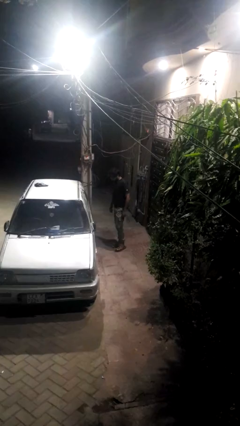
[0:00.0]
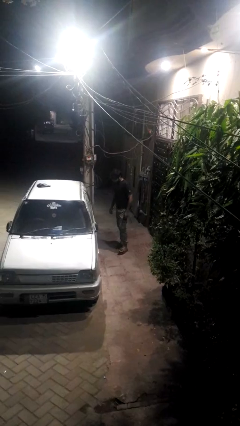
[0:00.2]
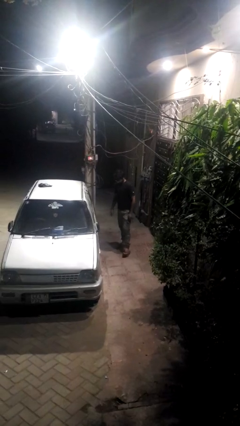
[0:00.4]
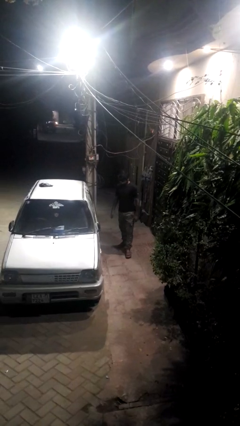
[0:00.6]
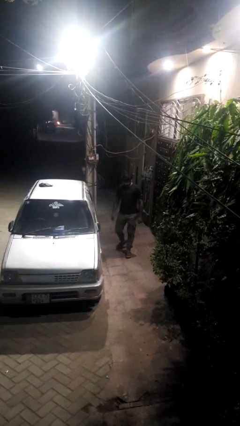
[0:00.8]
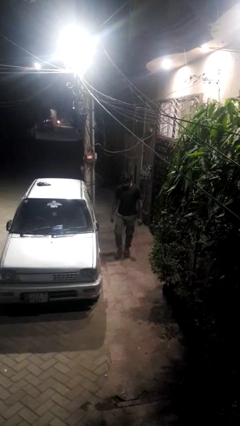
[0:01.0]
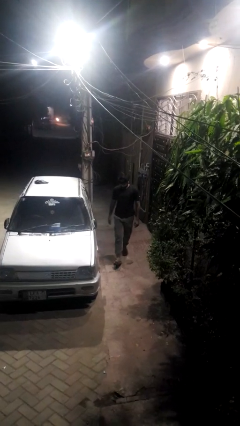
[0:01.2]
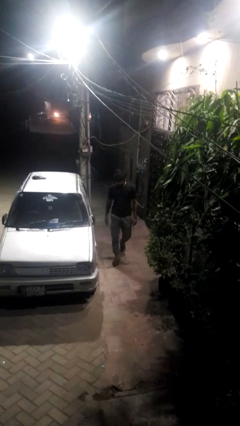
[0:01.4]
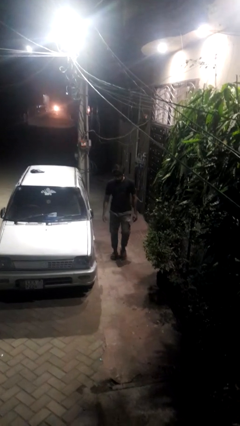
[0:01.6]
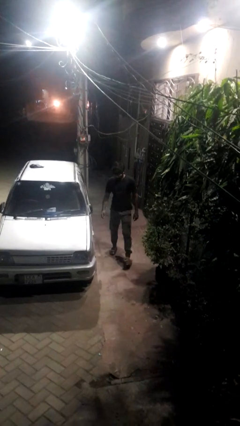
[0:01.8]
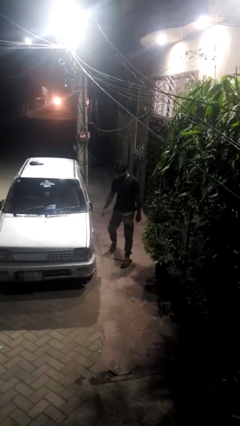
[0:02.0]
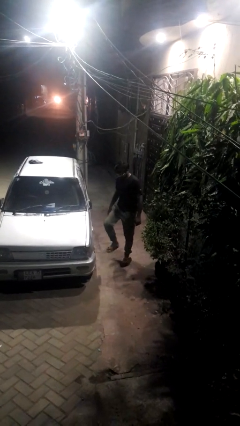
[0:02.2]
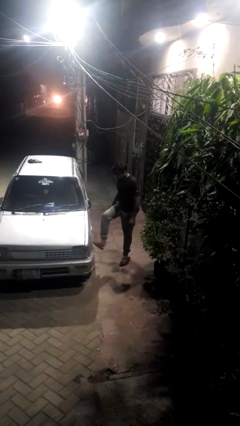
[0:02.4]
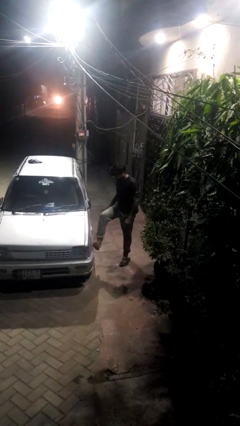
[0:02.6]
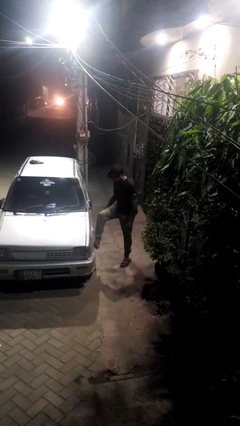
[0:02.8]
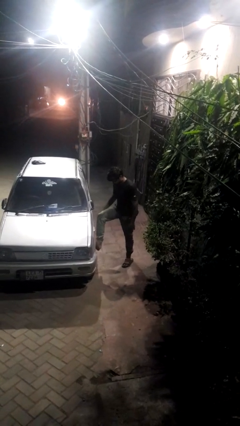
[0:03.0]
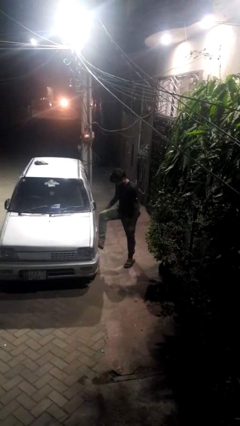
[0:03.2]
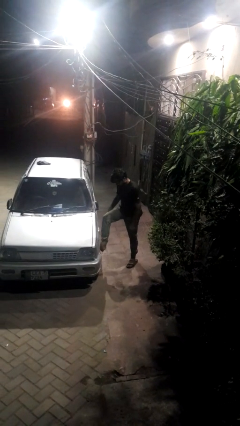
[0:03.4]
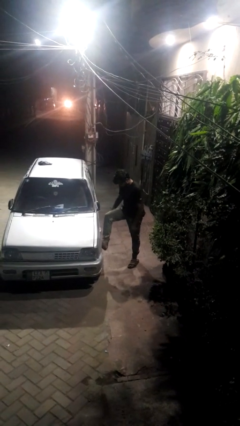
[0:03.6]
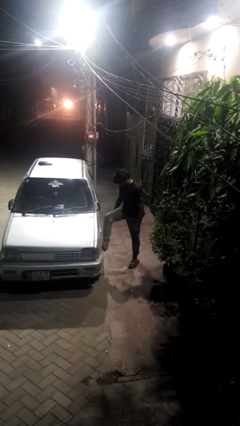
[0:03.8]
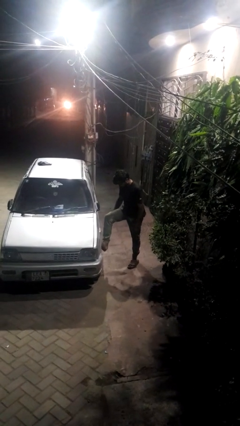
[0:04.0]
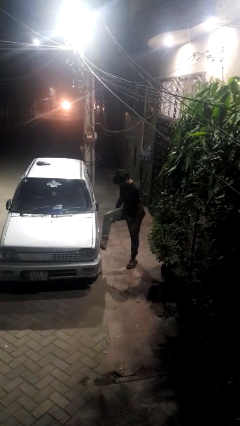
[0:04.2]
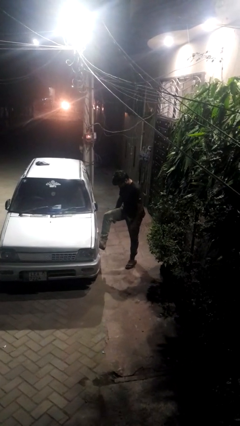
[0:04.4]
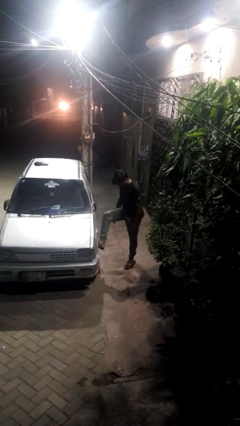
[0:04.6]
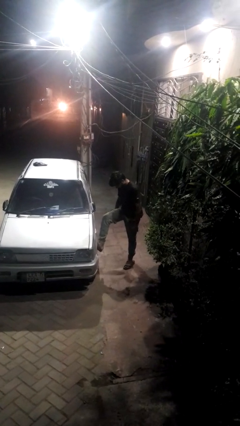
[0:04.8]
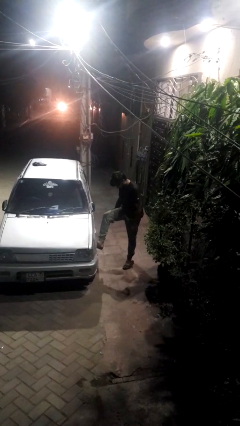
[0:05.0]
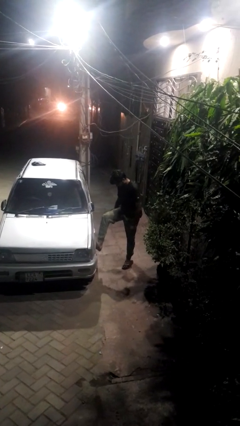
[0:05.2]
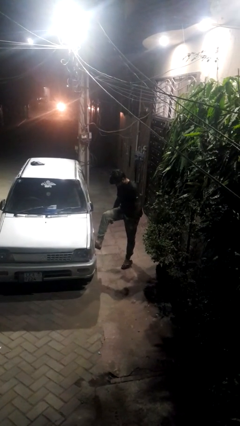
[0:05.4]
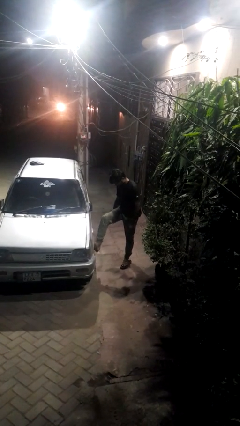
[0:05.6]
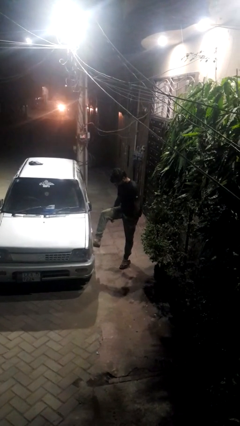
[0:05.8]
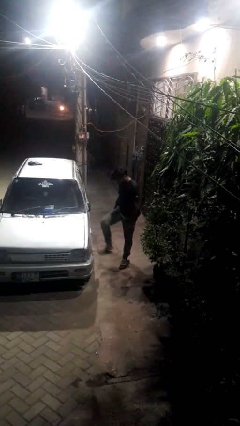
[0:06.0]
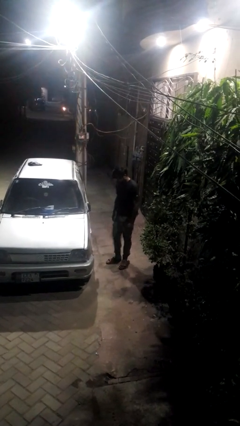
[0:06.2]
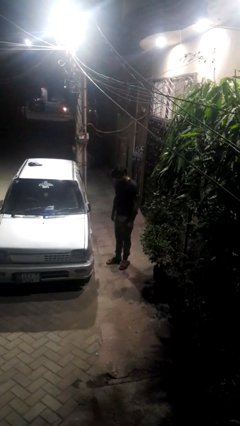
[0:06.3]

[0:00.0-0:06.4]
person kicks car tires

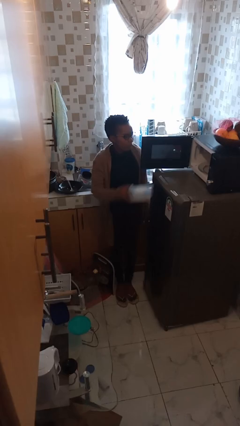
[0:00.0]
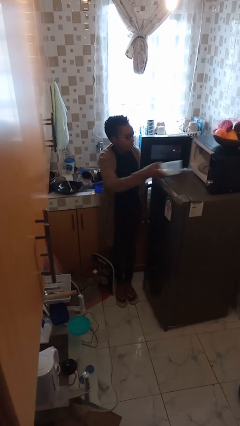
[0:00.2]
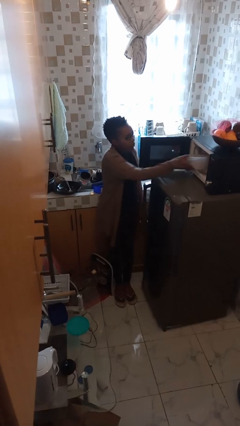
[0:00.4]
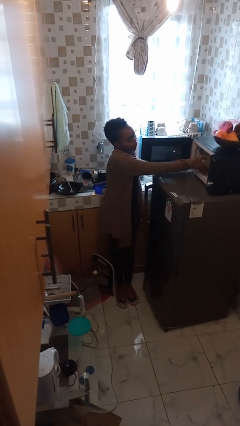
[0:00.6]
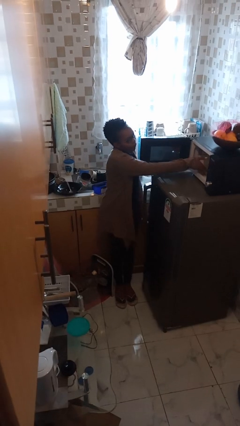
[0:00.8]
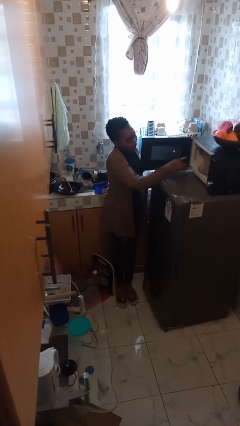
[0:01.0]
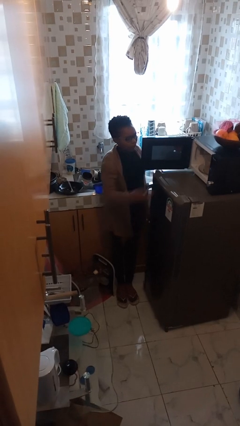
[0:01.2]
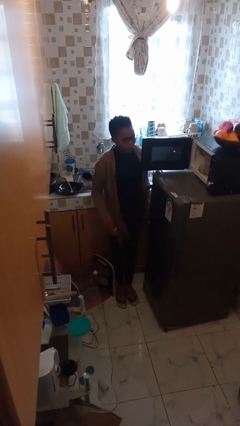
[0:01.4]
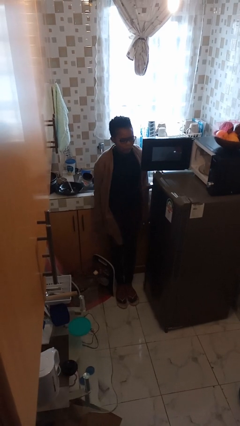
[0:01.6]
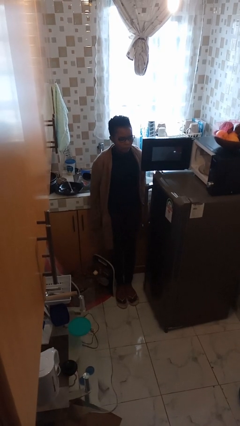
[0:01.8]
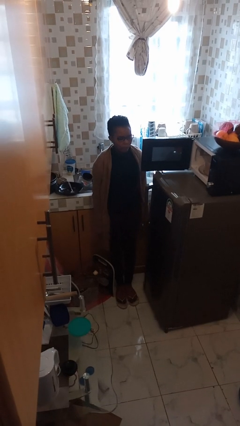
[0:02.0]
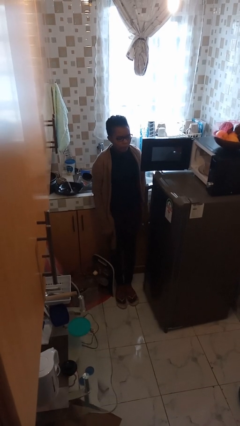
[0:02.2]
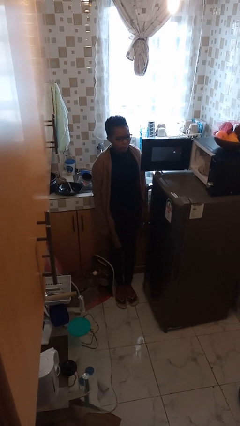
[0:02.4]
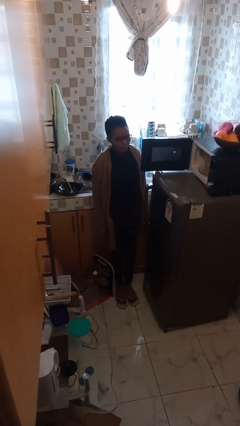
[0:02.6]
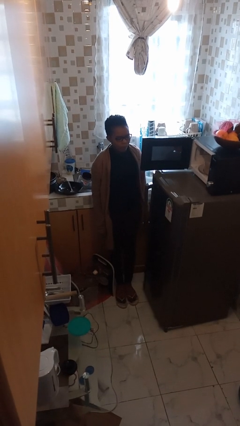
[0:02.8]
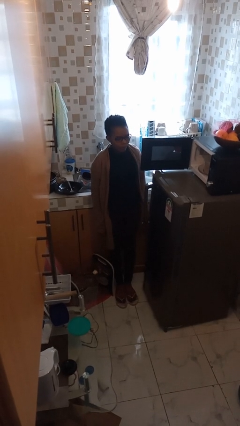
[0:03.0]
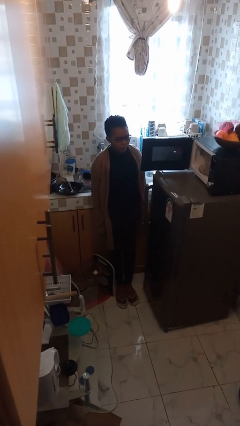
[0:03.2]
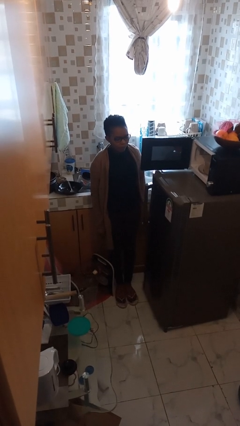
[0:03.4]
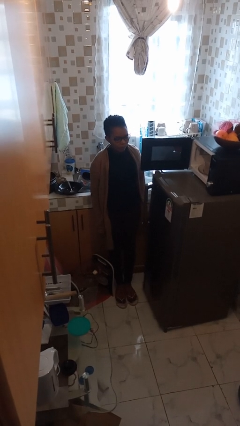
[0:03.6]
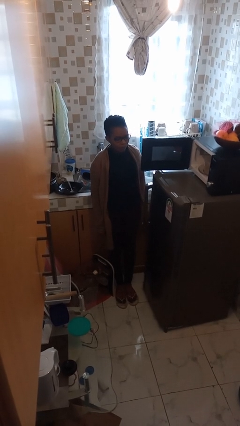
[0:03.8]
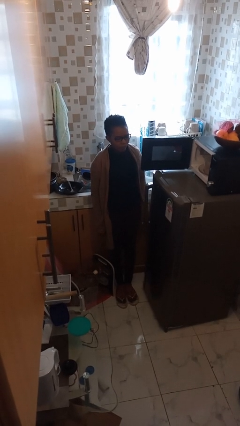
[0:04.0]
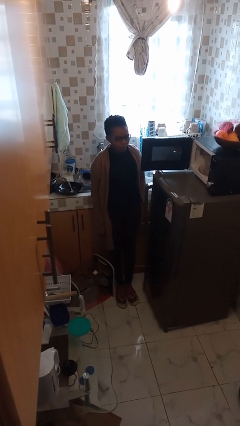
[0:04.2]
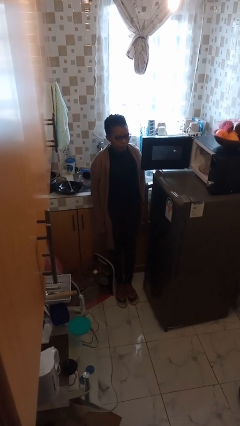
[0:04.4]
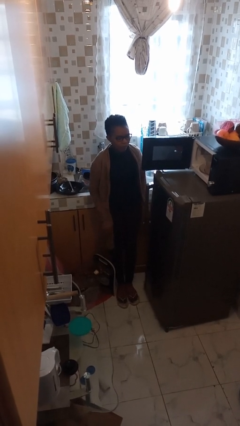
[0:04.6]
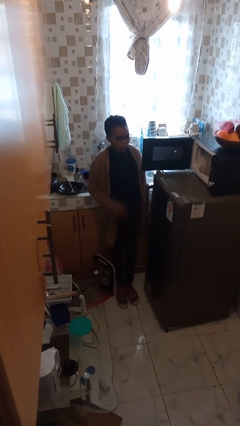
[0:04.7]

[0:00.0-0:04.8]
person puts object into microwave

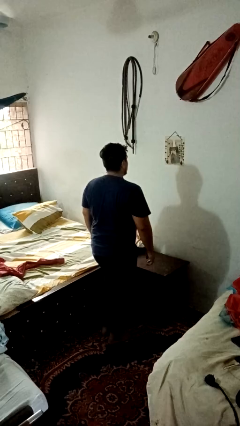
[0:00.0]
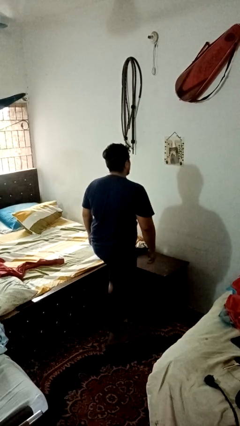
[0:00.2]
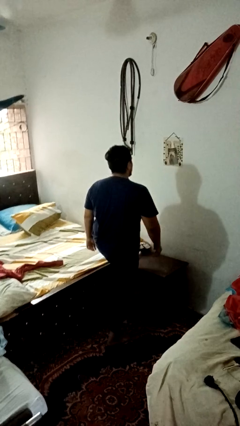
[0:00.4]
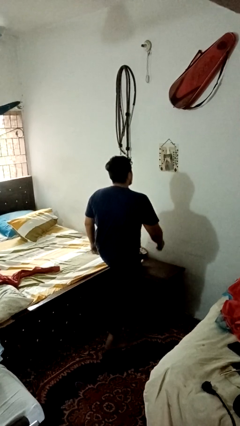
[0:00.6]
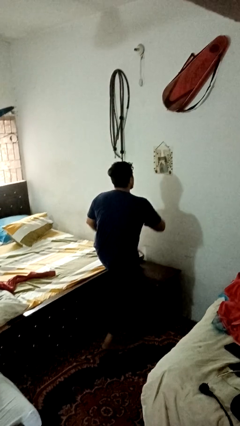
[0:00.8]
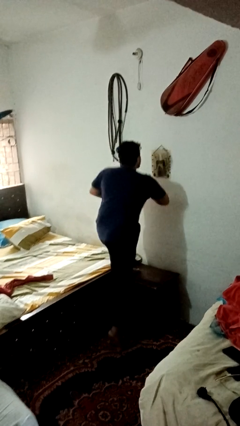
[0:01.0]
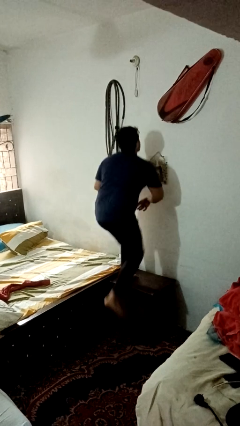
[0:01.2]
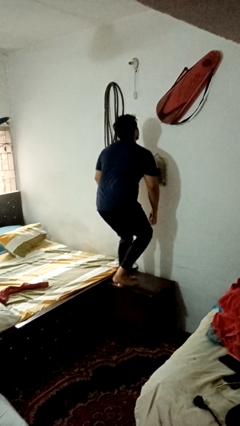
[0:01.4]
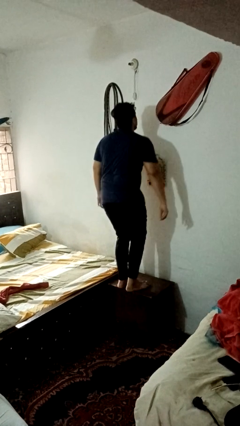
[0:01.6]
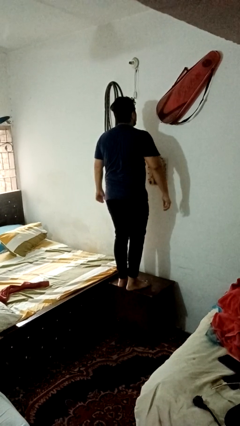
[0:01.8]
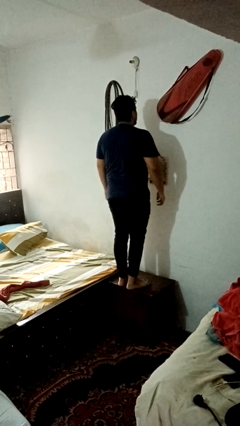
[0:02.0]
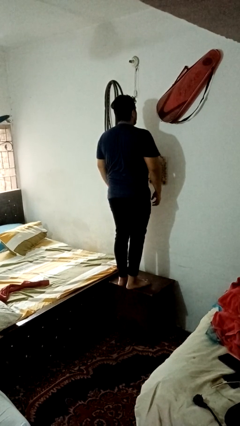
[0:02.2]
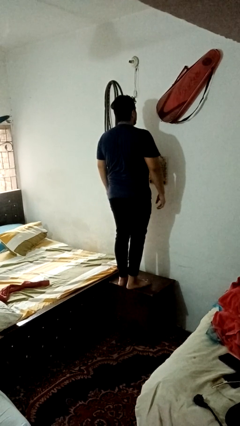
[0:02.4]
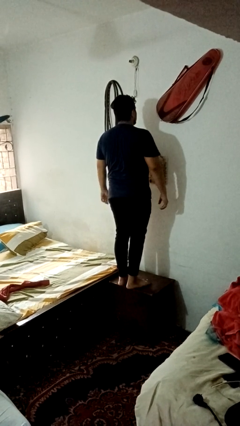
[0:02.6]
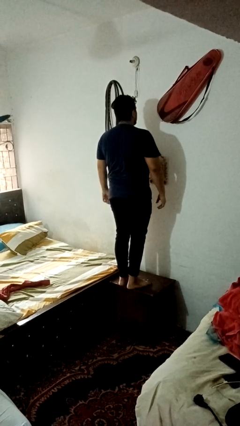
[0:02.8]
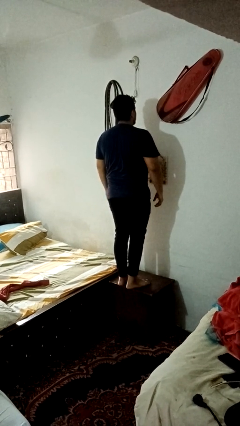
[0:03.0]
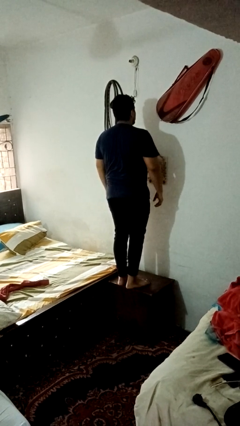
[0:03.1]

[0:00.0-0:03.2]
person climbs on table

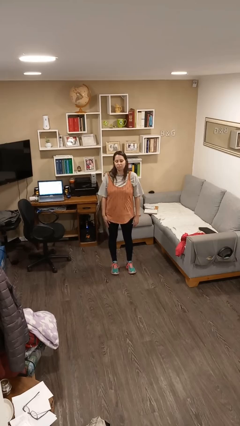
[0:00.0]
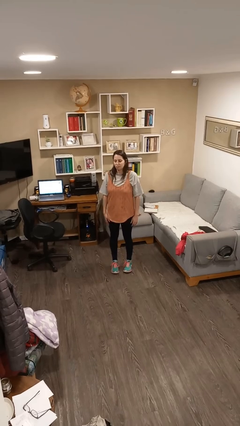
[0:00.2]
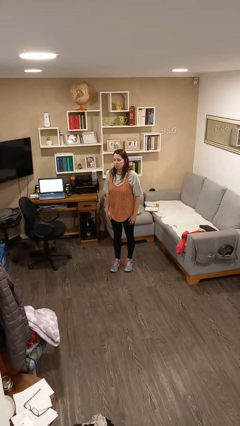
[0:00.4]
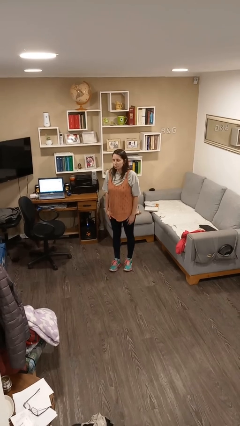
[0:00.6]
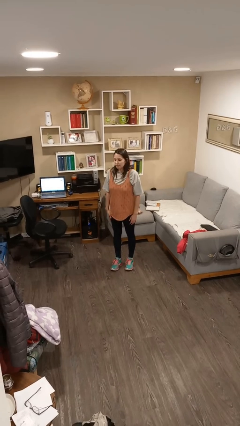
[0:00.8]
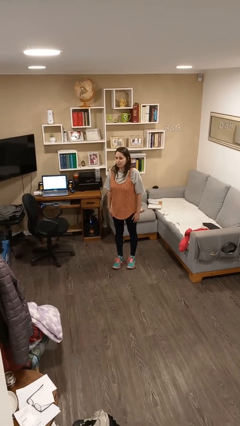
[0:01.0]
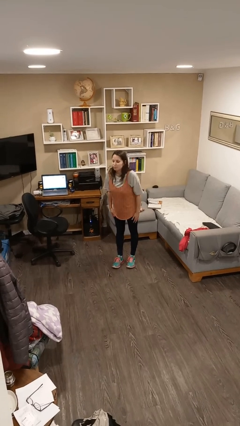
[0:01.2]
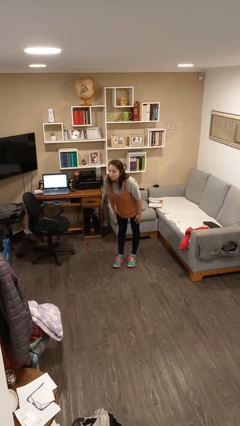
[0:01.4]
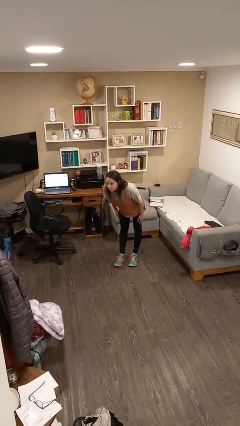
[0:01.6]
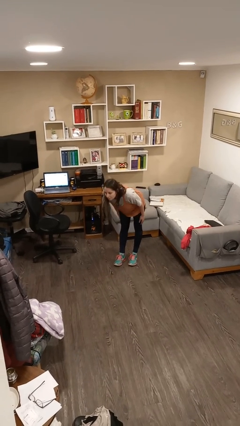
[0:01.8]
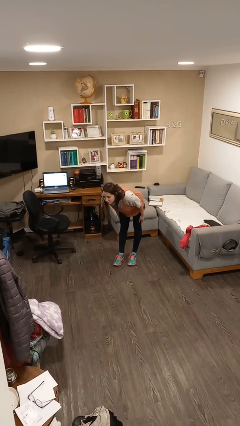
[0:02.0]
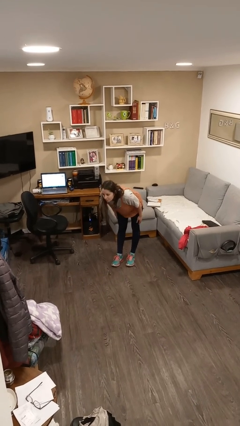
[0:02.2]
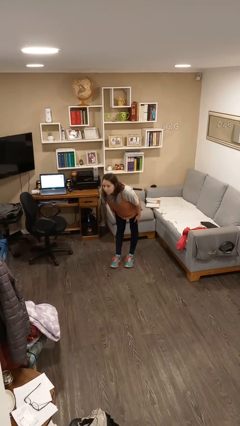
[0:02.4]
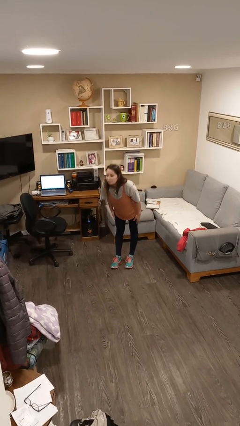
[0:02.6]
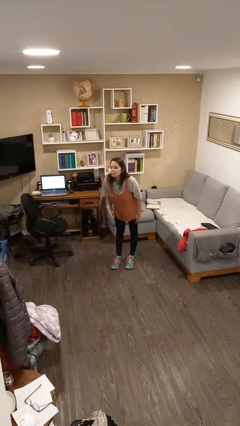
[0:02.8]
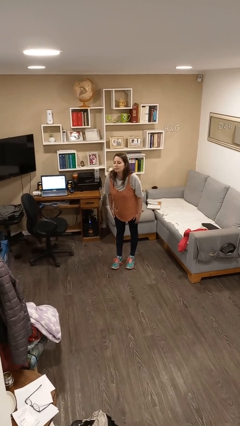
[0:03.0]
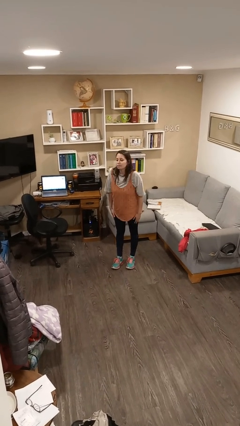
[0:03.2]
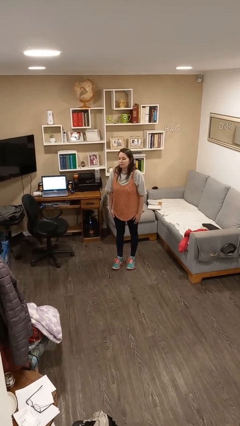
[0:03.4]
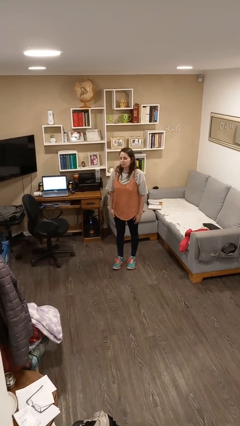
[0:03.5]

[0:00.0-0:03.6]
person bows
